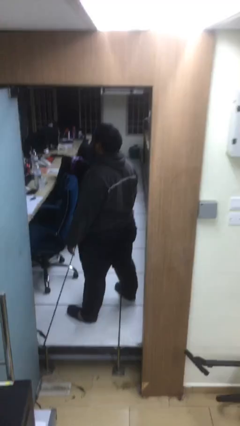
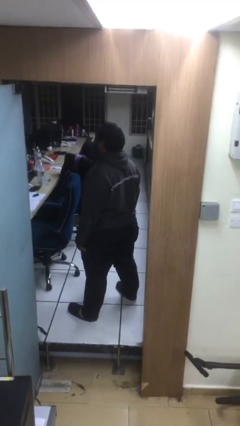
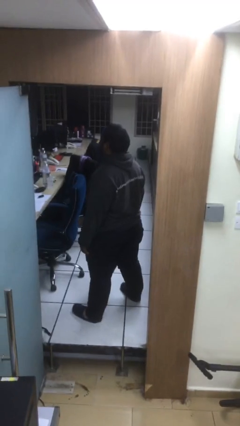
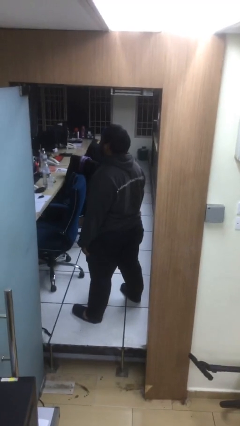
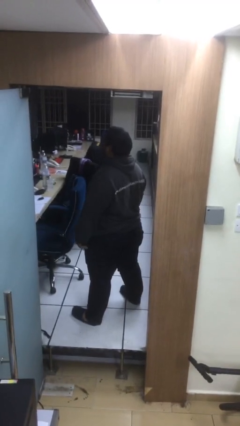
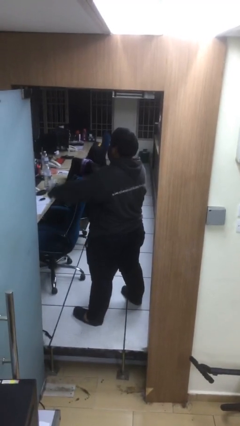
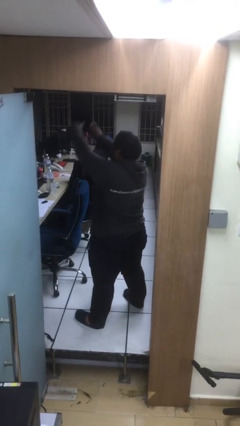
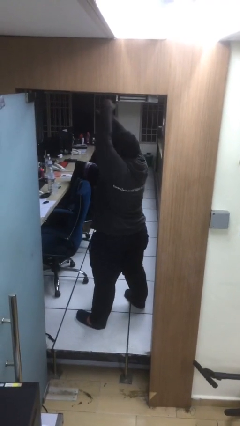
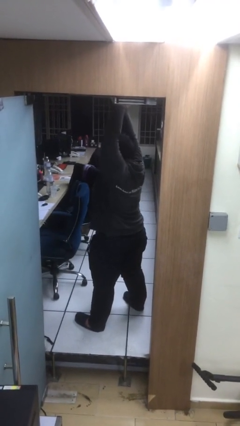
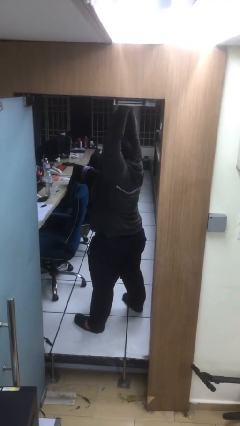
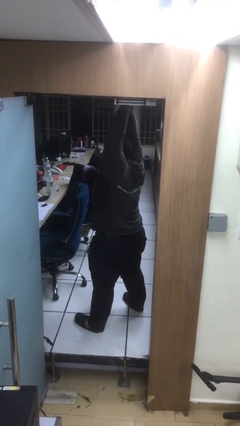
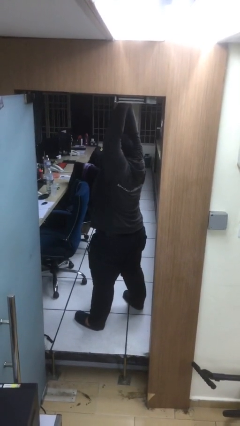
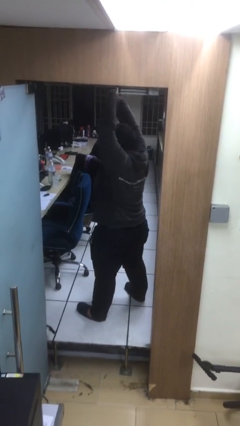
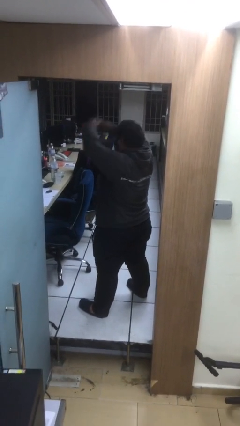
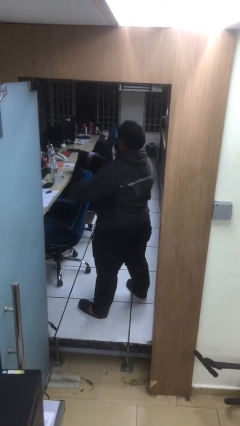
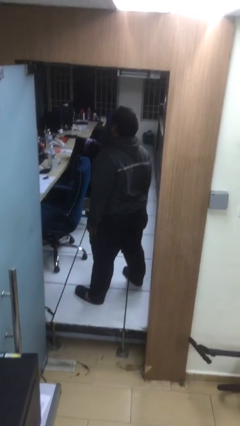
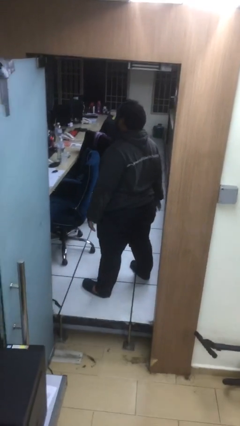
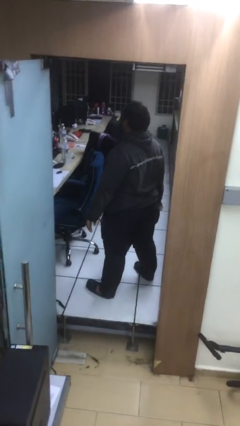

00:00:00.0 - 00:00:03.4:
person stretches arms over head

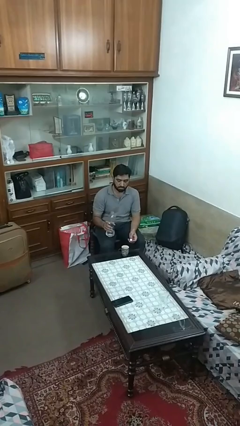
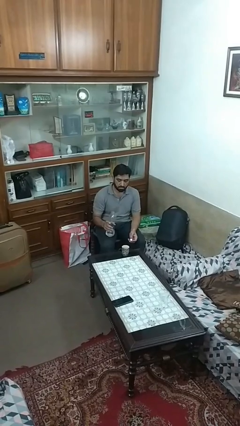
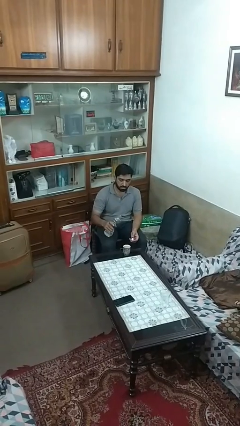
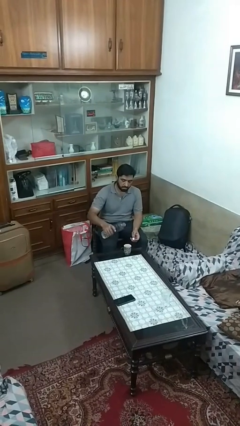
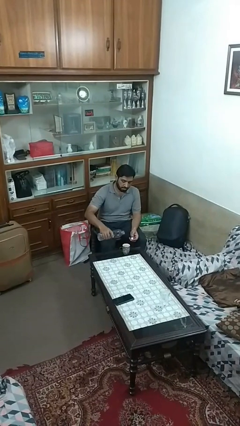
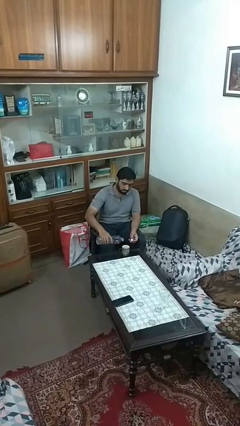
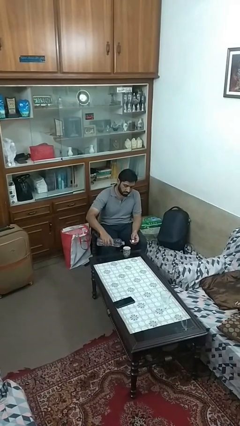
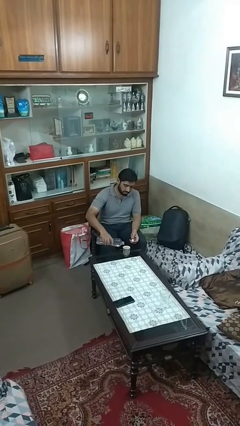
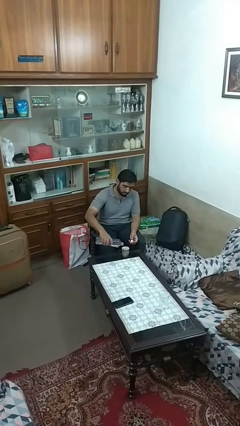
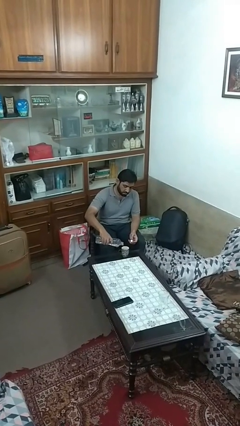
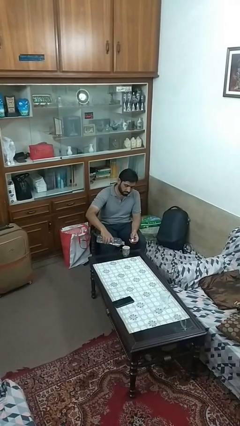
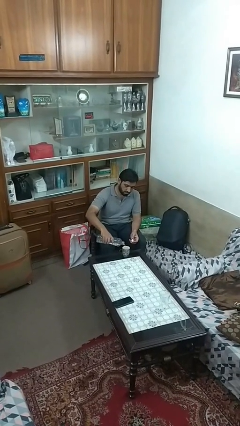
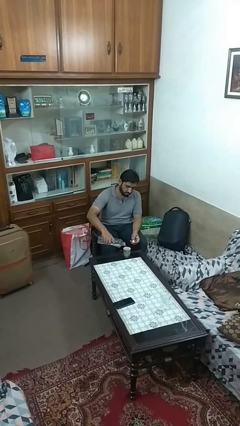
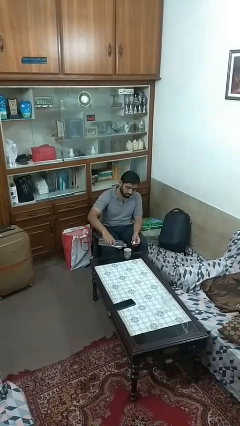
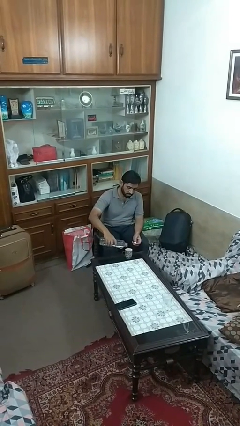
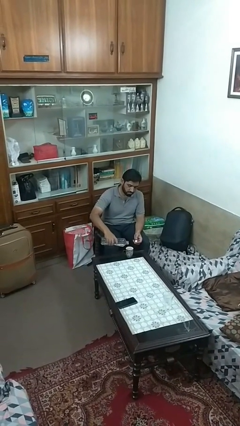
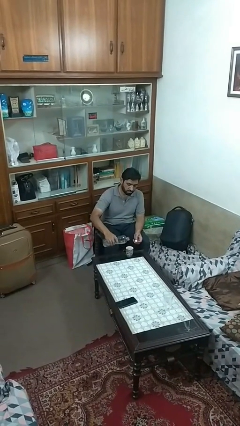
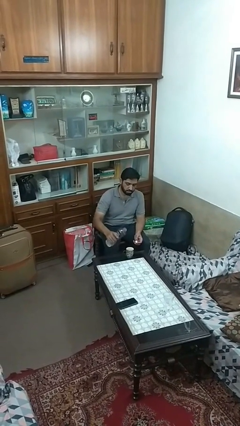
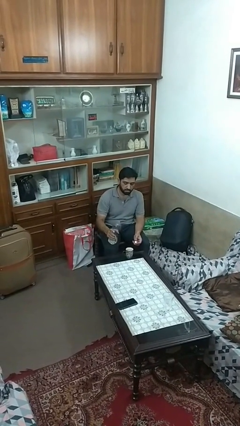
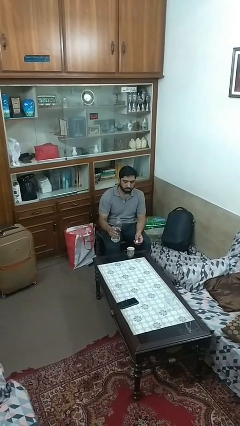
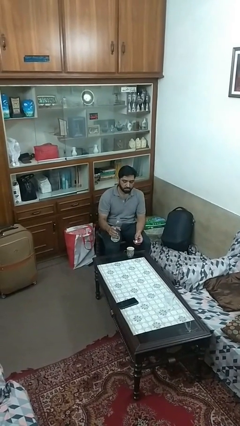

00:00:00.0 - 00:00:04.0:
person pours liquid into cup

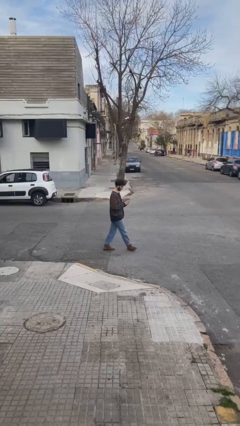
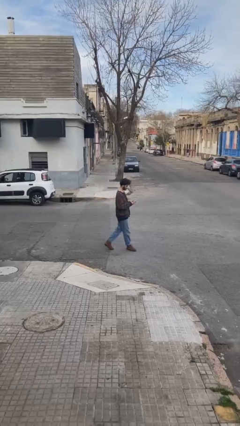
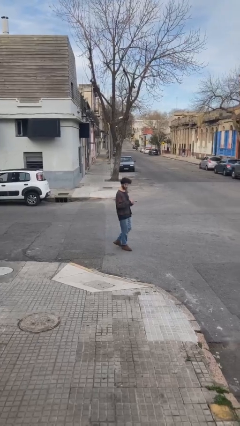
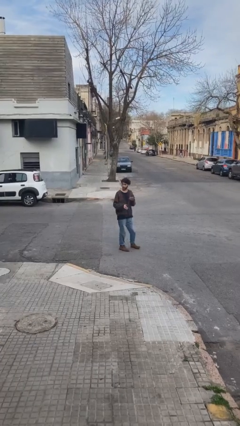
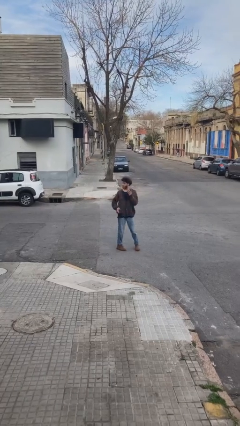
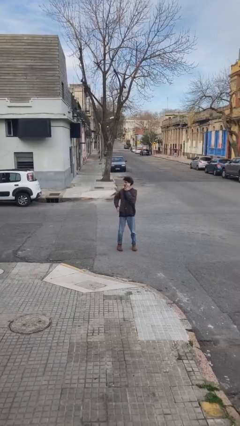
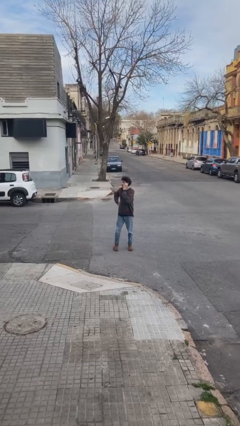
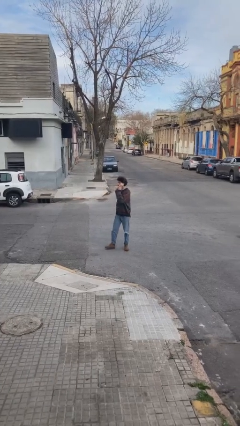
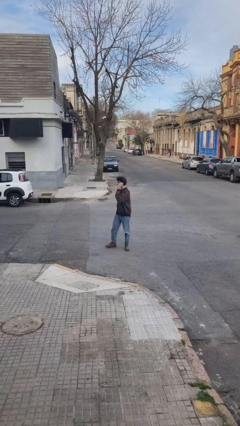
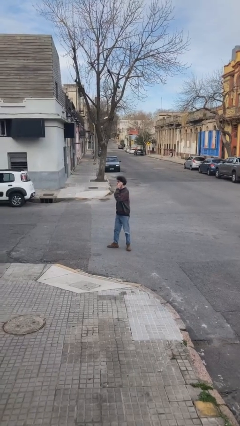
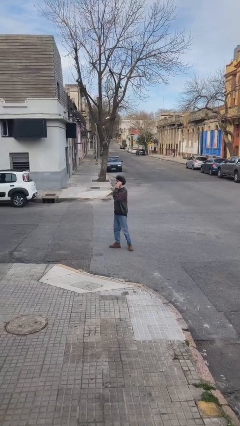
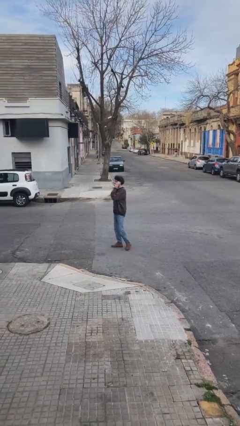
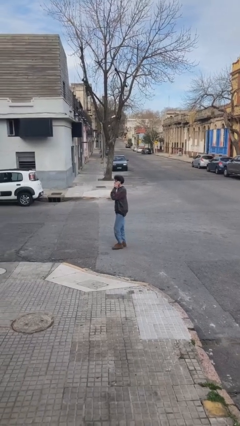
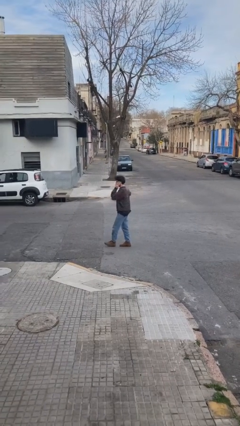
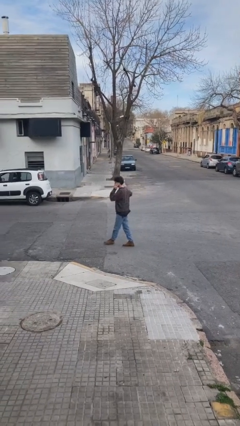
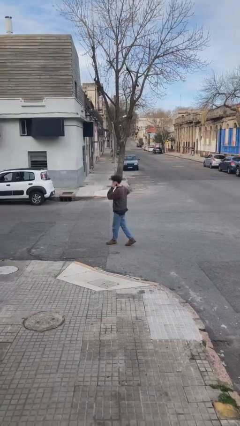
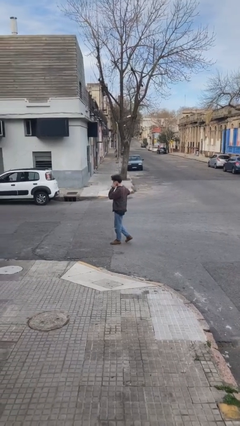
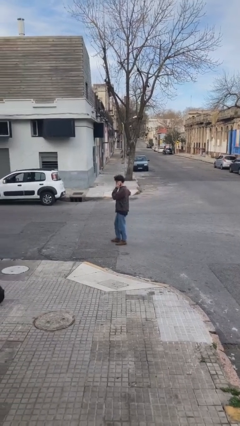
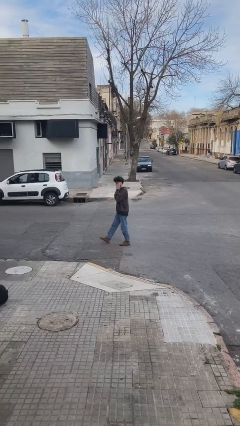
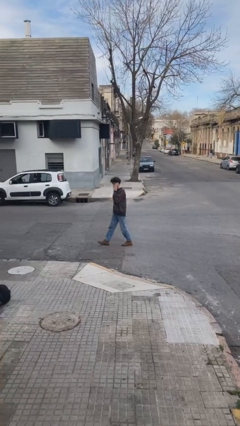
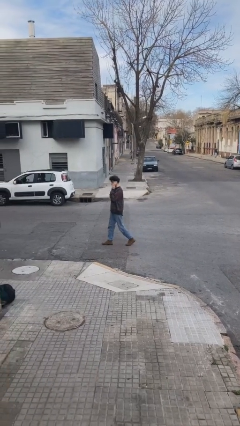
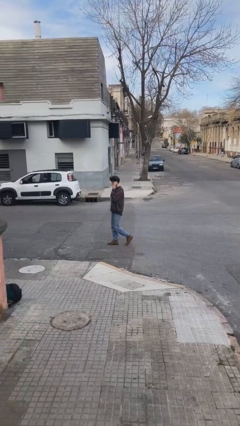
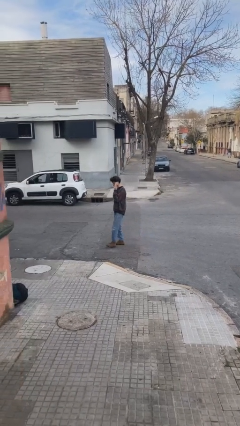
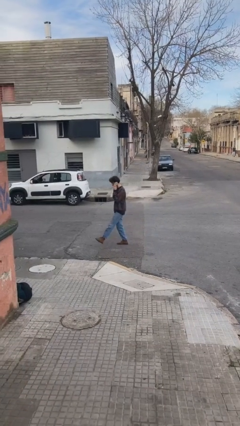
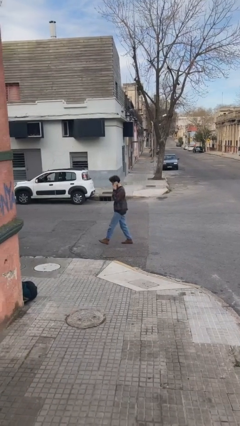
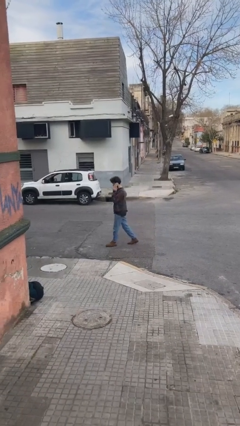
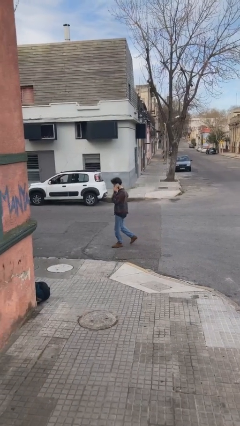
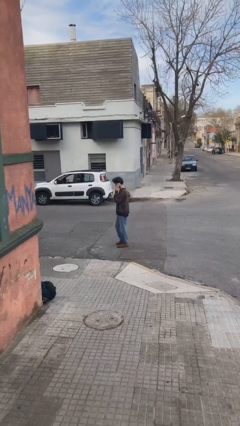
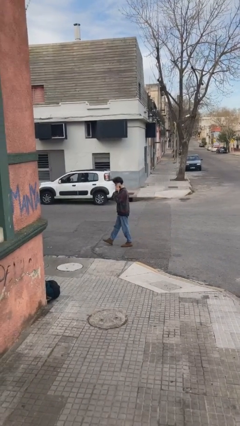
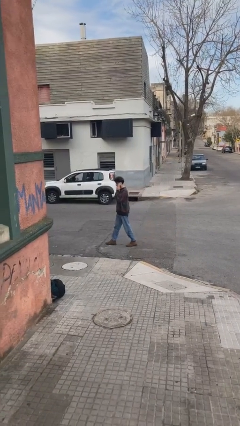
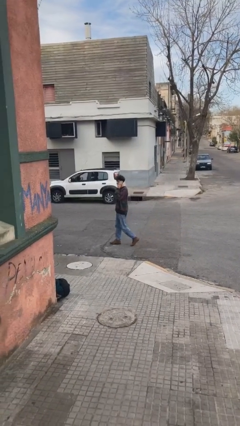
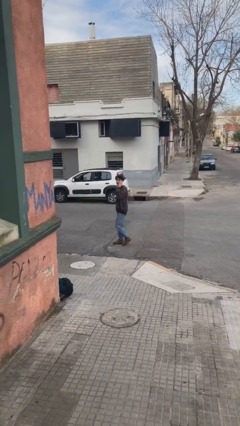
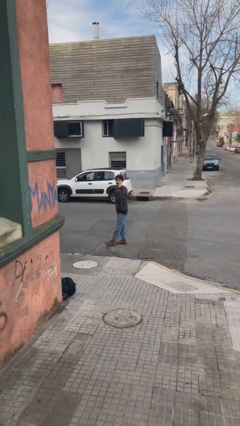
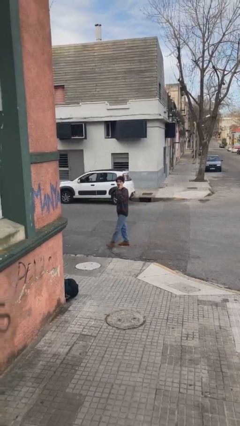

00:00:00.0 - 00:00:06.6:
person talks on phone

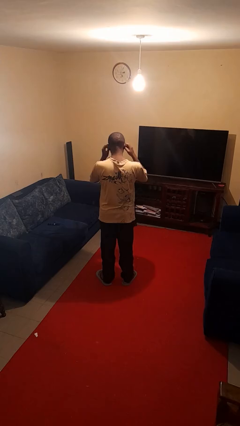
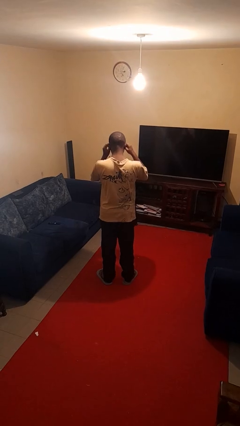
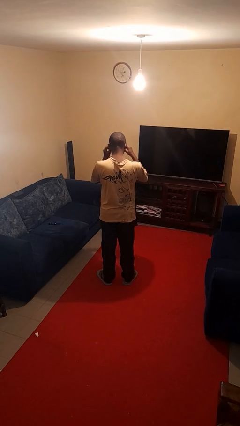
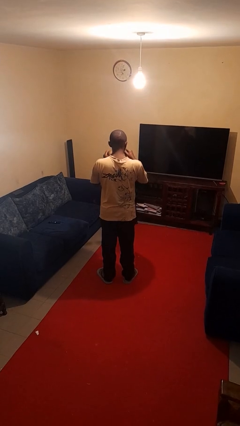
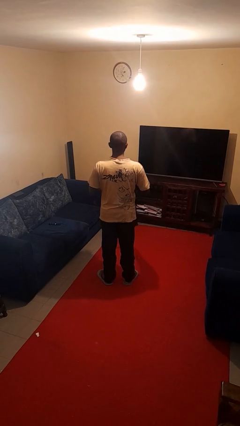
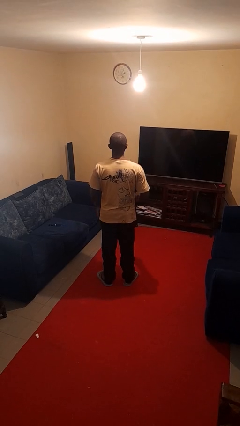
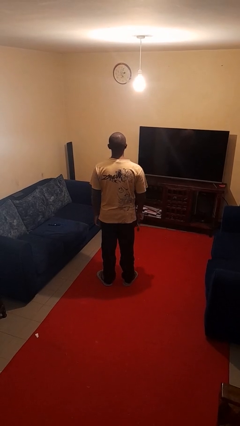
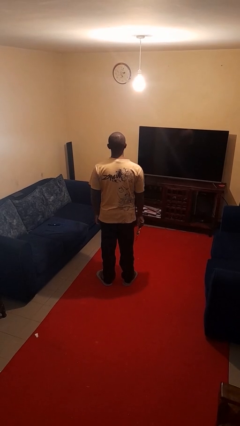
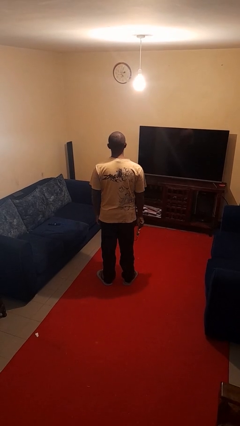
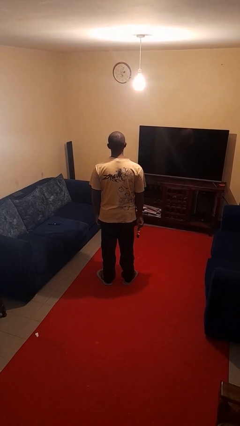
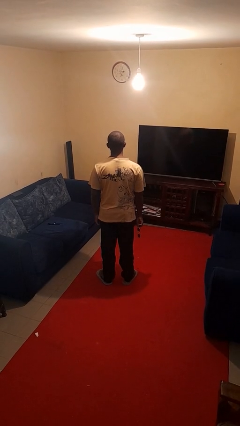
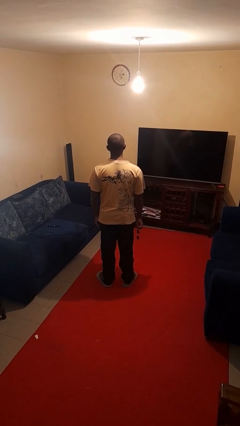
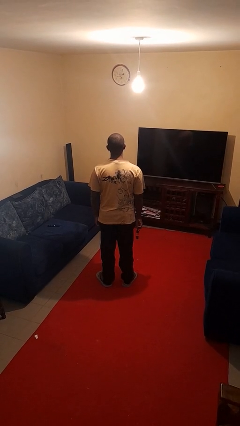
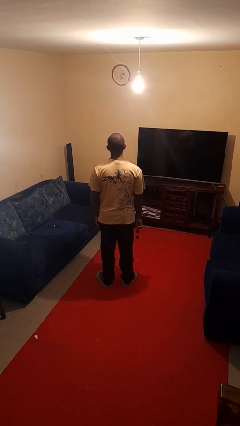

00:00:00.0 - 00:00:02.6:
person takes off sunglasses

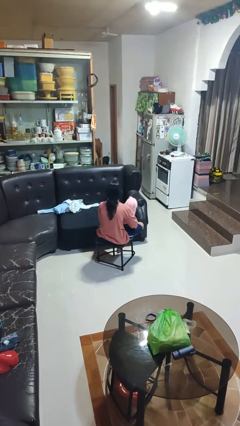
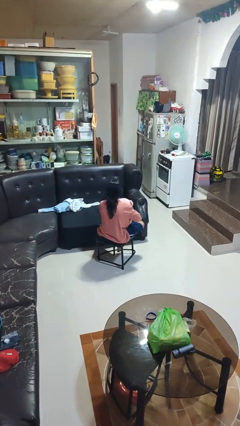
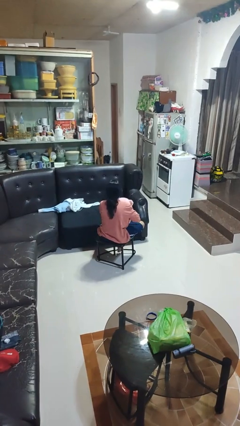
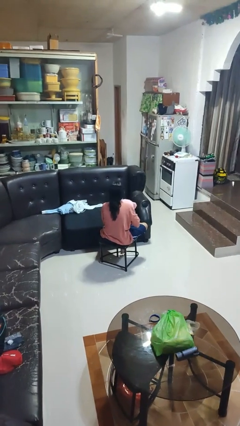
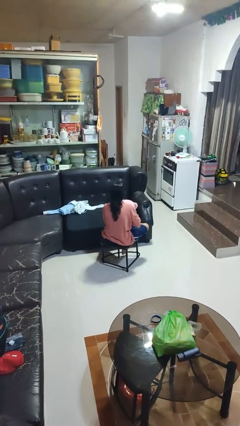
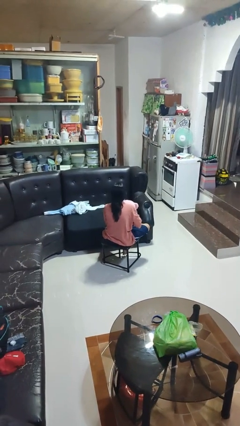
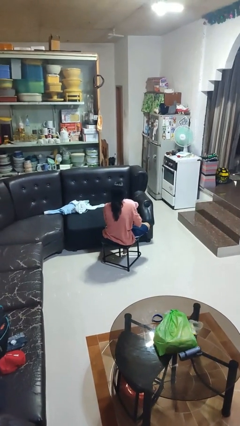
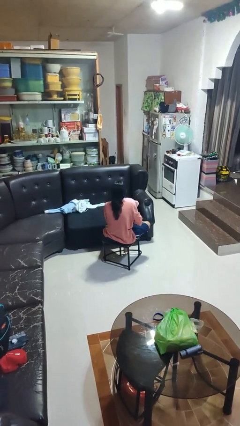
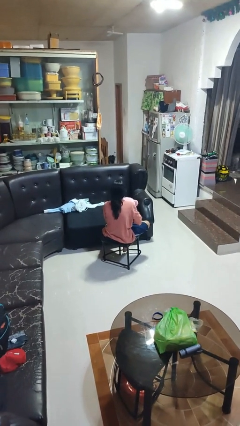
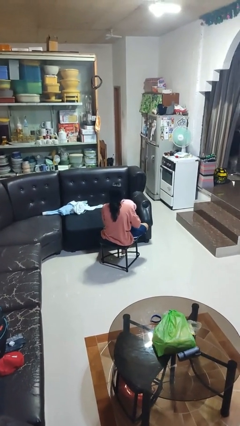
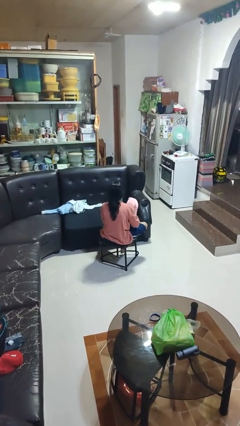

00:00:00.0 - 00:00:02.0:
person hugs stuffed animal
